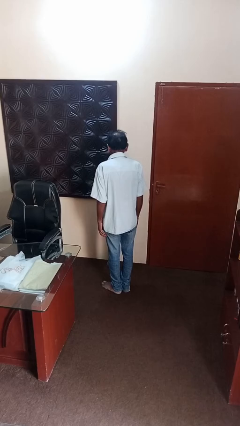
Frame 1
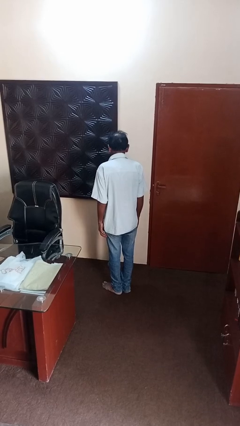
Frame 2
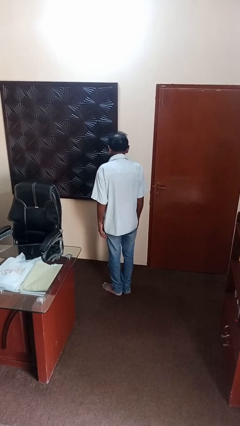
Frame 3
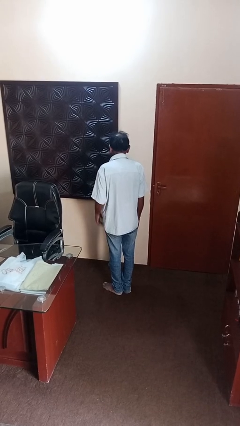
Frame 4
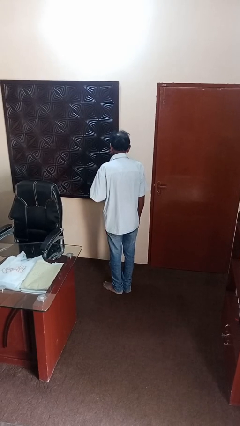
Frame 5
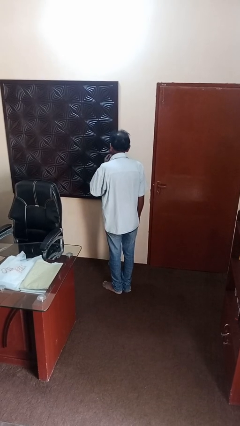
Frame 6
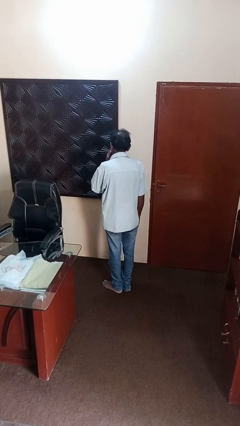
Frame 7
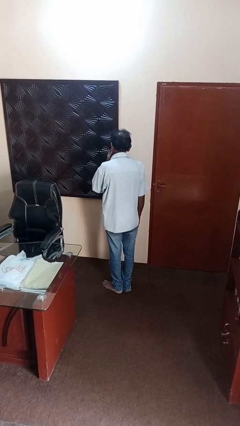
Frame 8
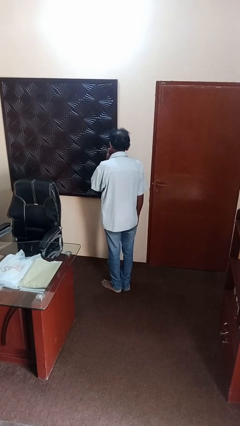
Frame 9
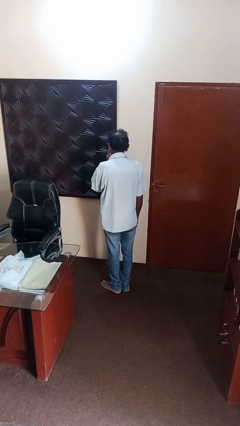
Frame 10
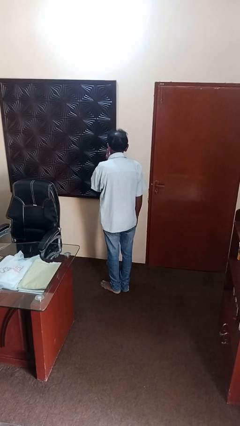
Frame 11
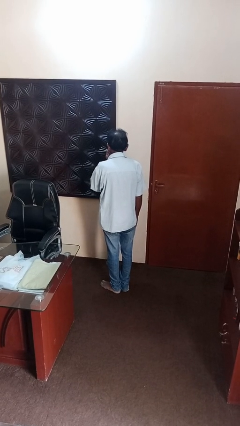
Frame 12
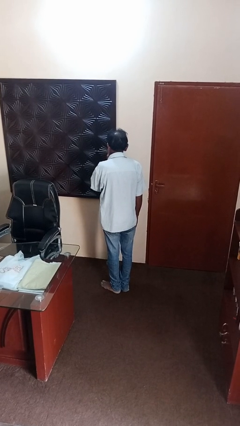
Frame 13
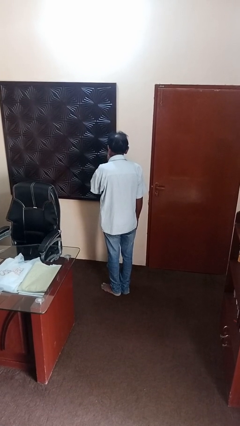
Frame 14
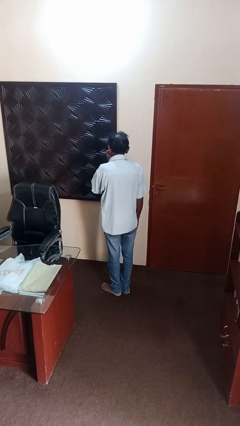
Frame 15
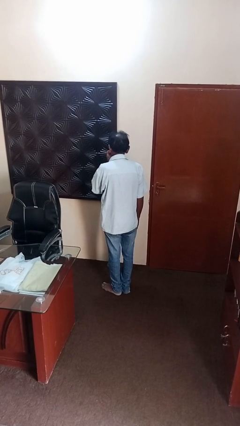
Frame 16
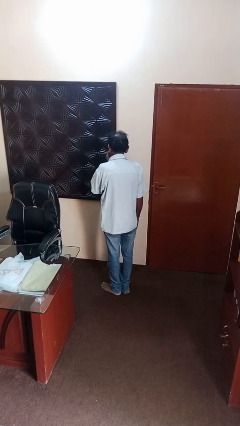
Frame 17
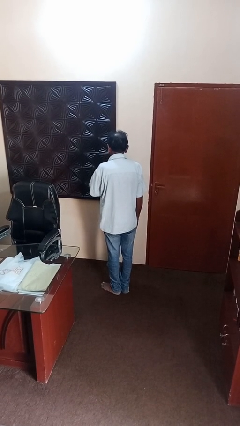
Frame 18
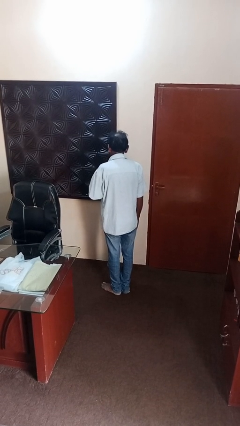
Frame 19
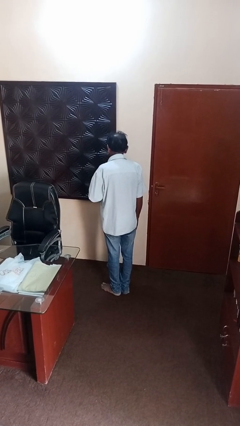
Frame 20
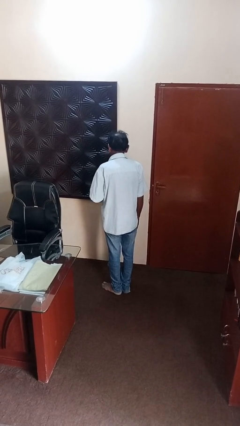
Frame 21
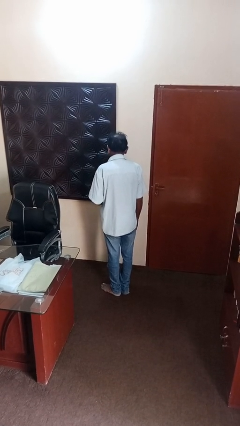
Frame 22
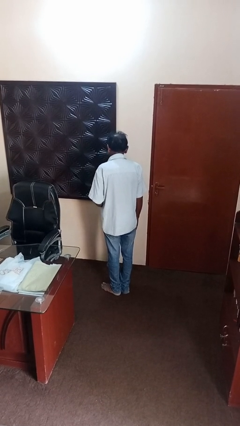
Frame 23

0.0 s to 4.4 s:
person licks fingers

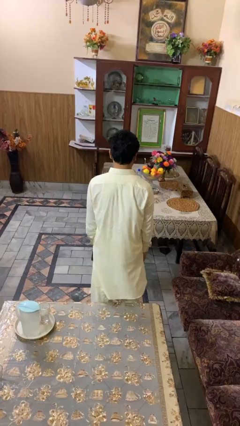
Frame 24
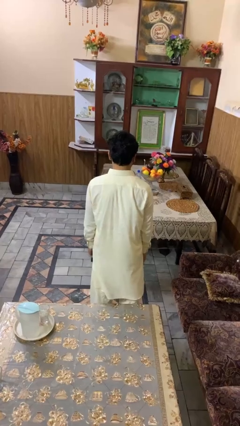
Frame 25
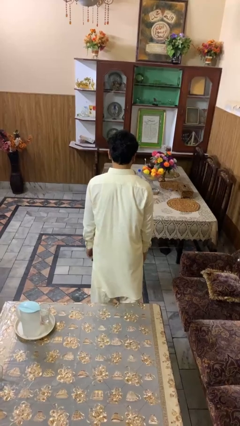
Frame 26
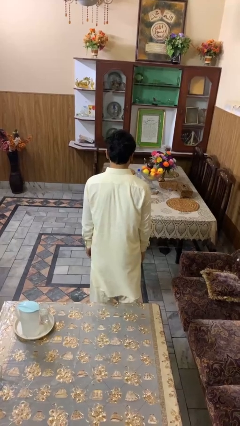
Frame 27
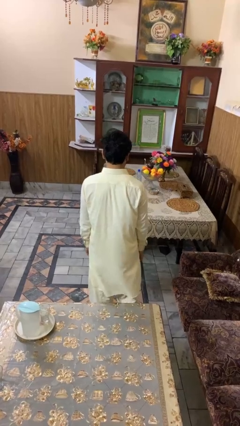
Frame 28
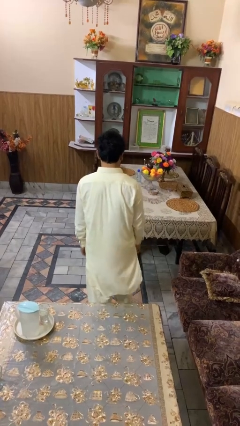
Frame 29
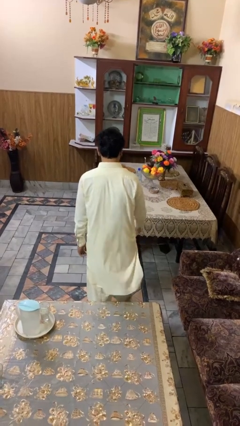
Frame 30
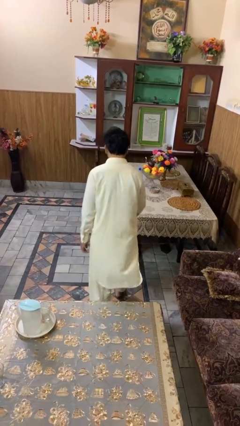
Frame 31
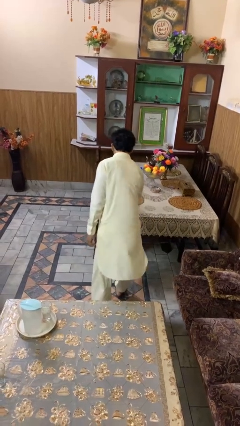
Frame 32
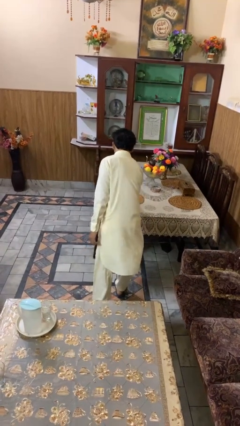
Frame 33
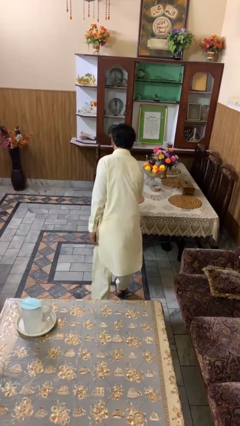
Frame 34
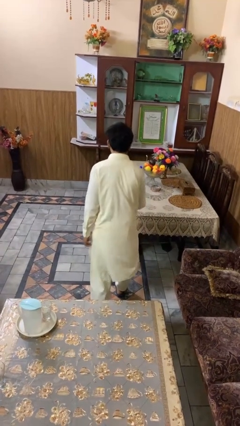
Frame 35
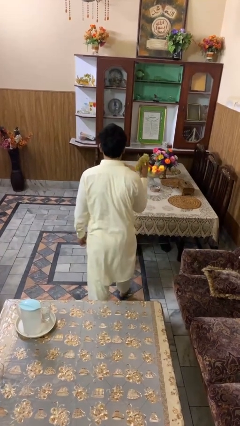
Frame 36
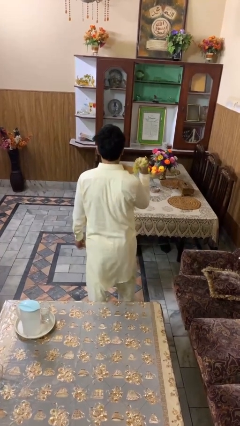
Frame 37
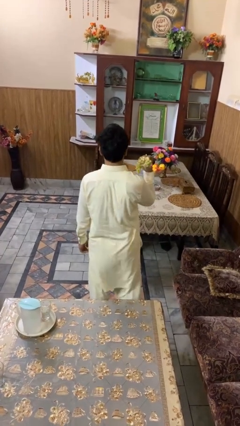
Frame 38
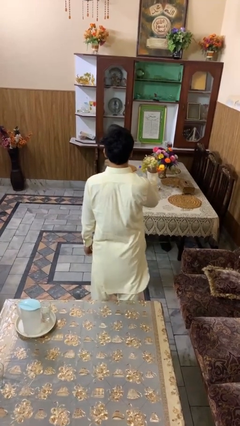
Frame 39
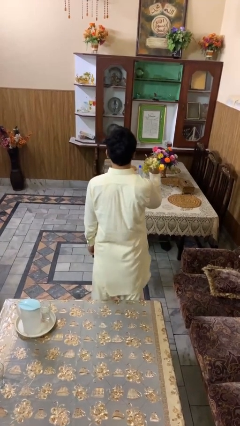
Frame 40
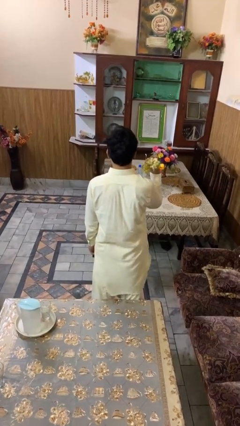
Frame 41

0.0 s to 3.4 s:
person picks up object from table

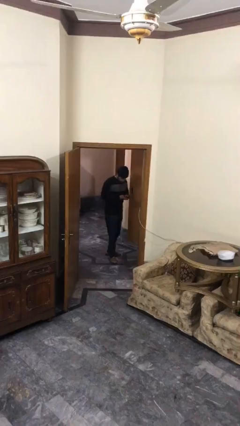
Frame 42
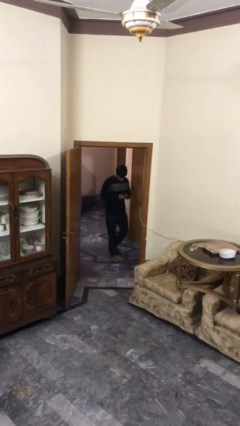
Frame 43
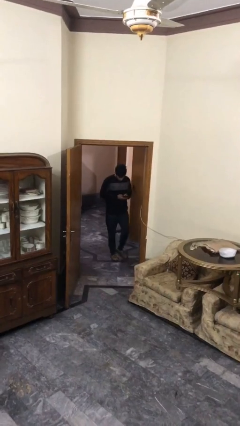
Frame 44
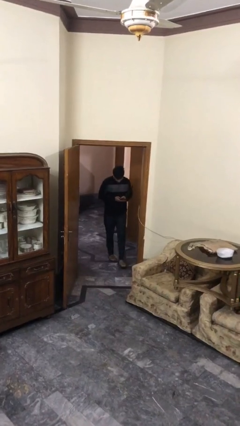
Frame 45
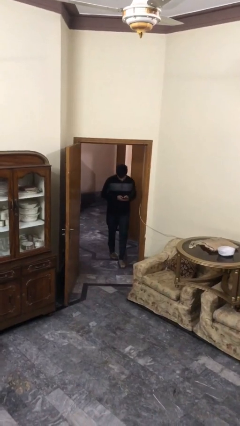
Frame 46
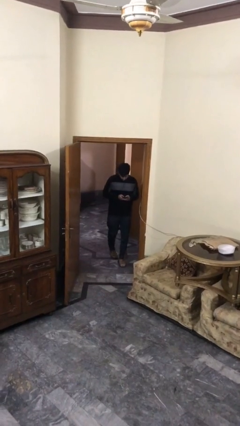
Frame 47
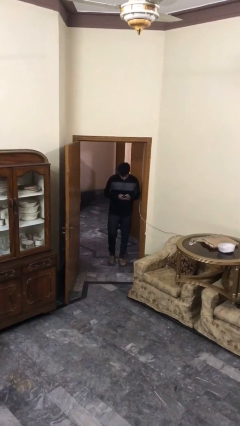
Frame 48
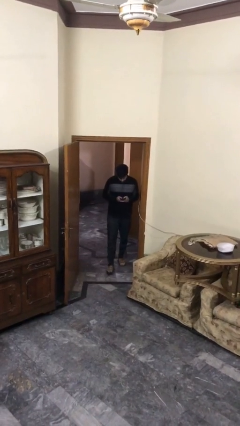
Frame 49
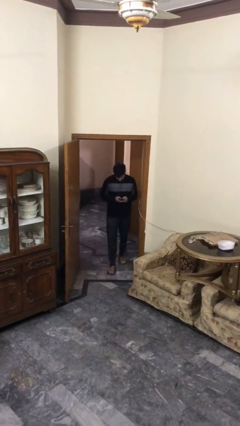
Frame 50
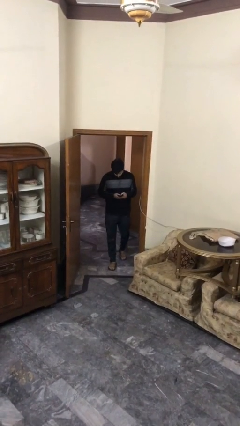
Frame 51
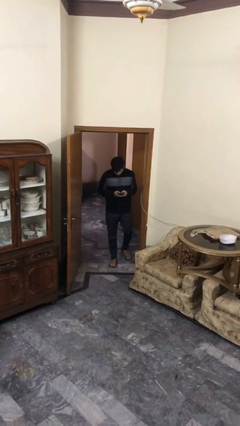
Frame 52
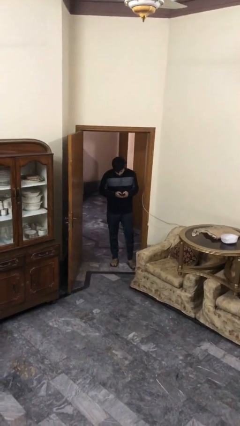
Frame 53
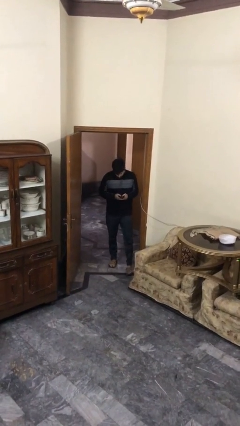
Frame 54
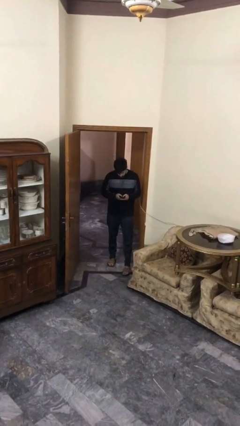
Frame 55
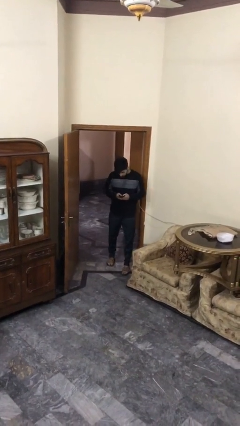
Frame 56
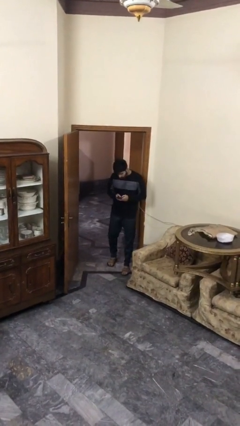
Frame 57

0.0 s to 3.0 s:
person enters scene through structure

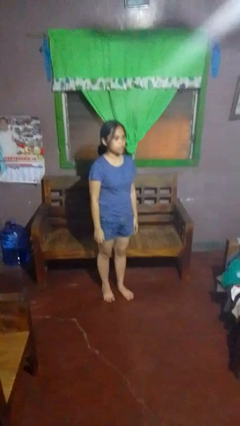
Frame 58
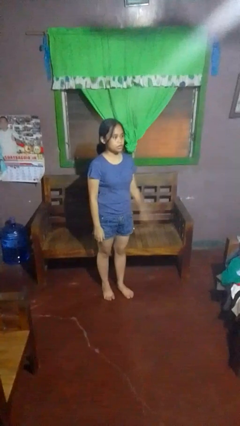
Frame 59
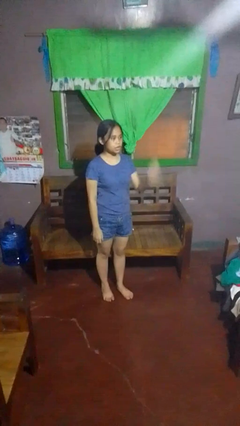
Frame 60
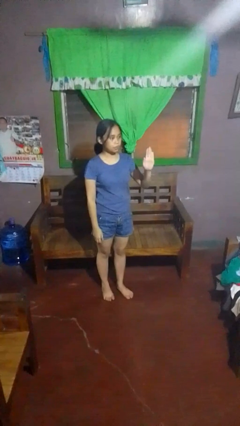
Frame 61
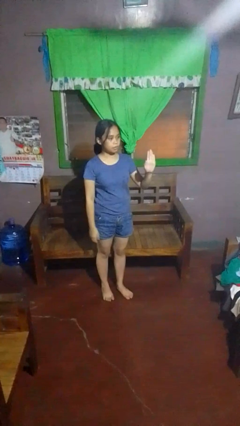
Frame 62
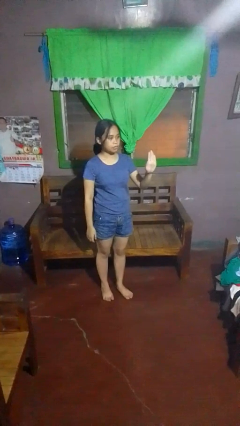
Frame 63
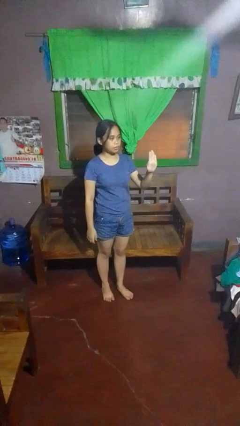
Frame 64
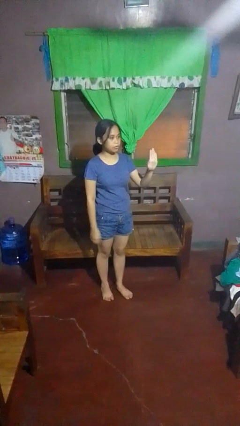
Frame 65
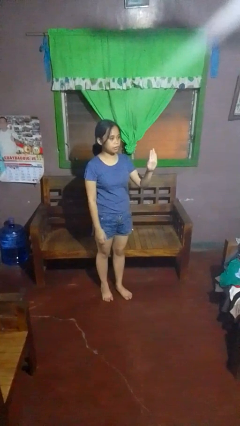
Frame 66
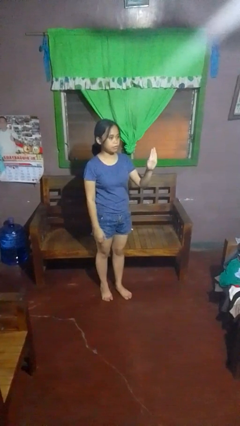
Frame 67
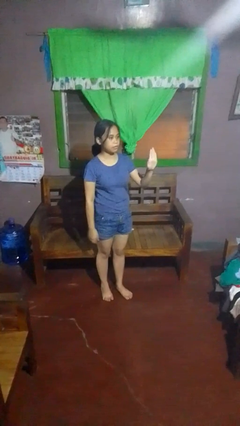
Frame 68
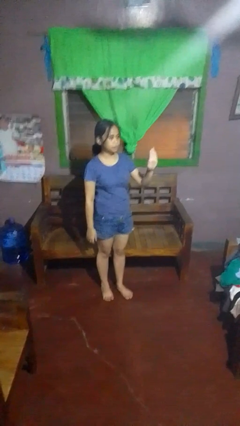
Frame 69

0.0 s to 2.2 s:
person gestures stop

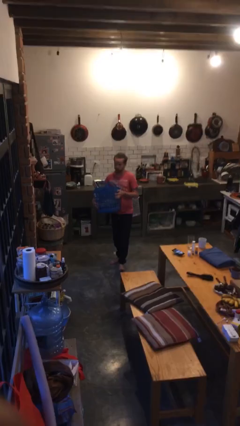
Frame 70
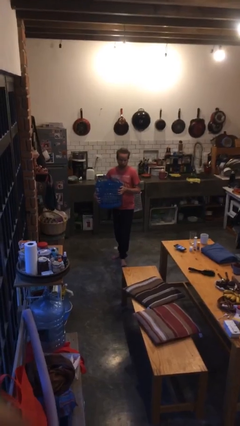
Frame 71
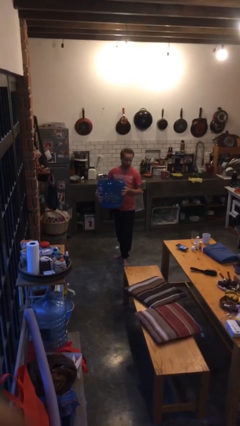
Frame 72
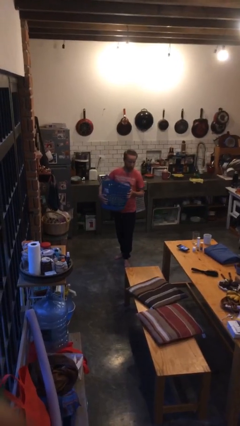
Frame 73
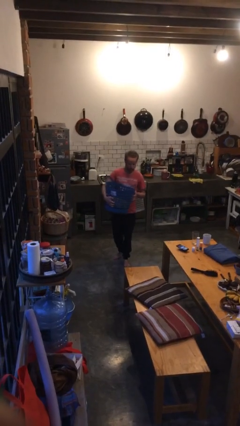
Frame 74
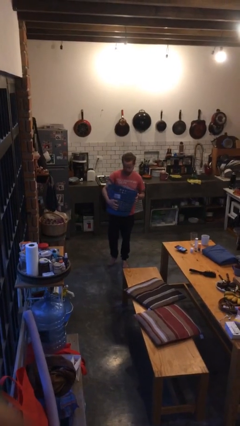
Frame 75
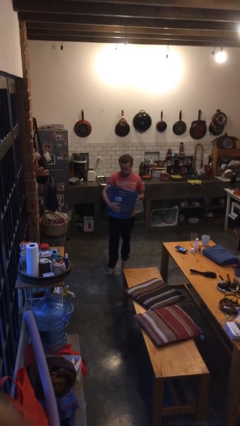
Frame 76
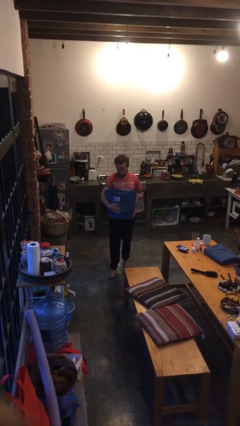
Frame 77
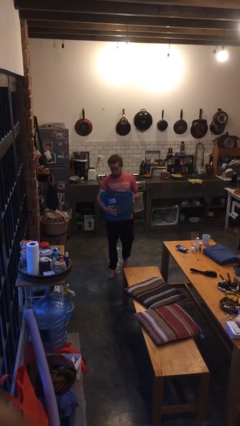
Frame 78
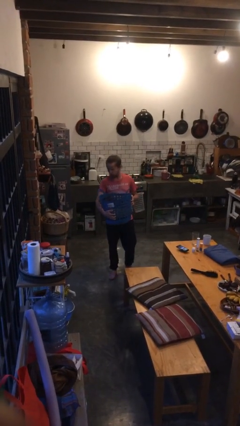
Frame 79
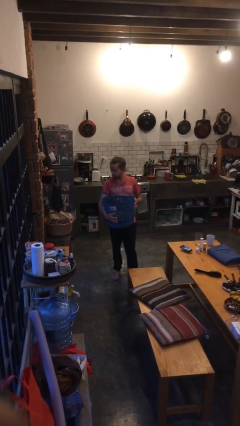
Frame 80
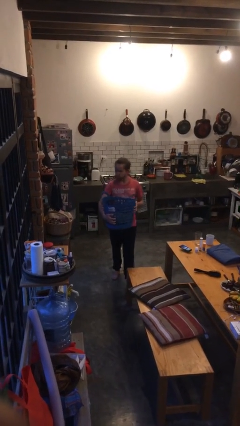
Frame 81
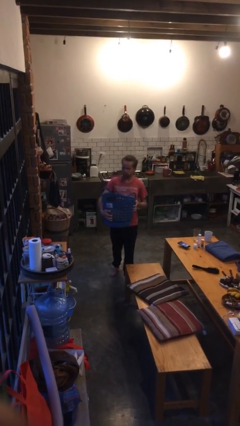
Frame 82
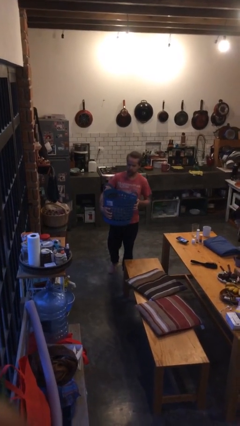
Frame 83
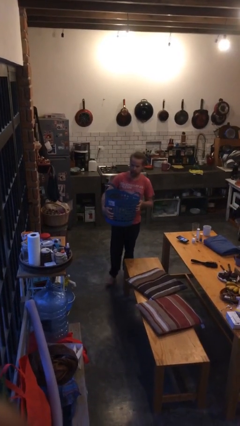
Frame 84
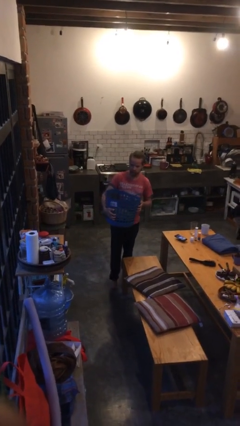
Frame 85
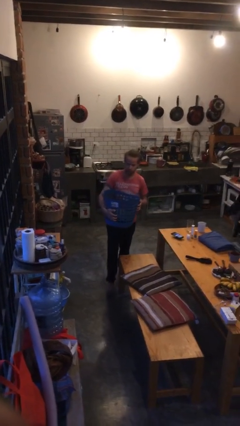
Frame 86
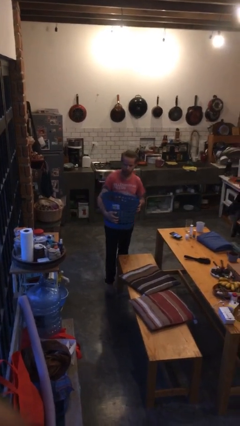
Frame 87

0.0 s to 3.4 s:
person carries laundry basket

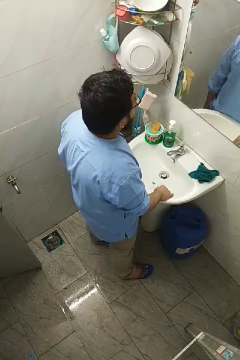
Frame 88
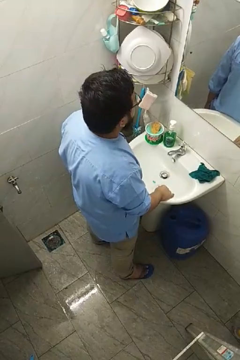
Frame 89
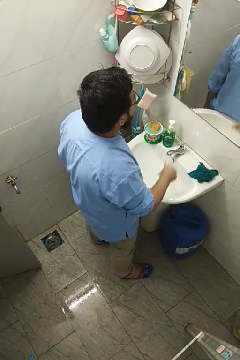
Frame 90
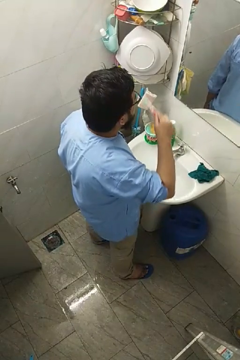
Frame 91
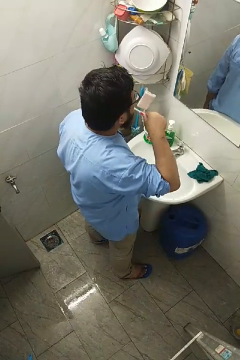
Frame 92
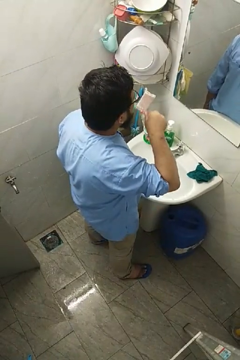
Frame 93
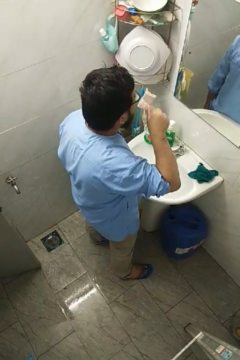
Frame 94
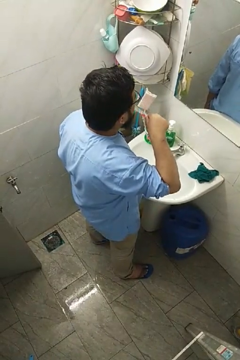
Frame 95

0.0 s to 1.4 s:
person brushes teeth
